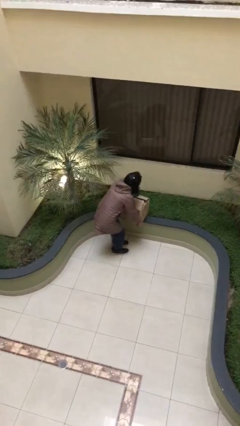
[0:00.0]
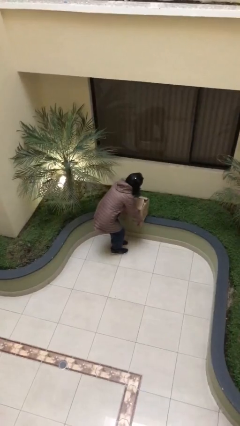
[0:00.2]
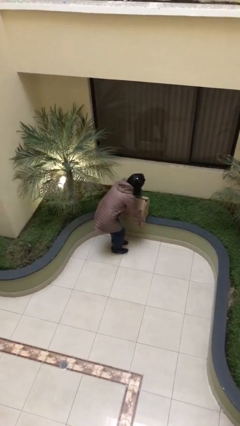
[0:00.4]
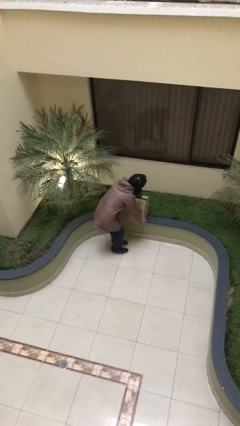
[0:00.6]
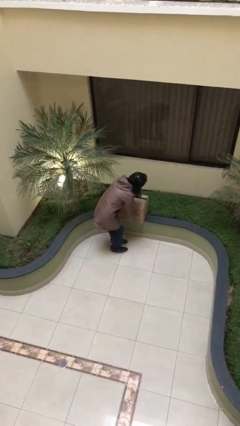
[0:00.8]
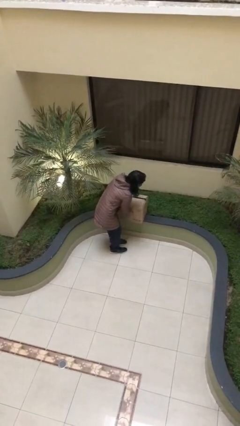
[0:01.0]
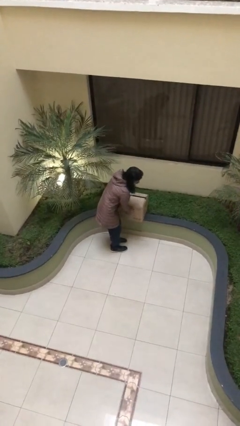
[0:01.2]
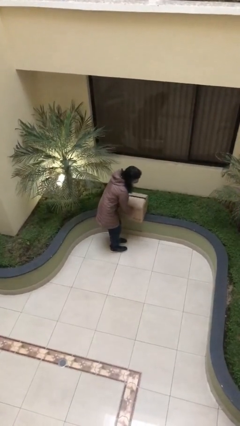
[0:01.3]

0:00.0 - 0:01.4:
person puts down object on table

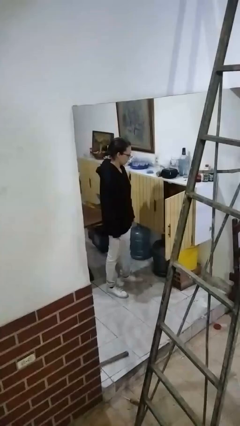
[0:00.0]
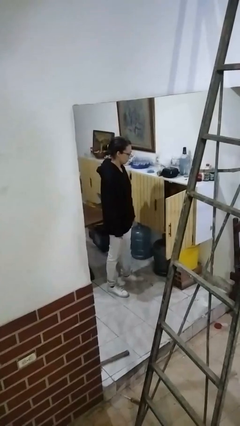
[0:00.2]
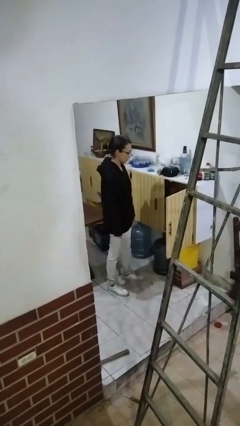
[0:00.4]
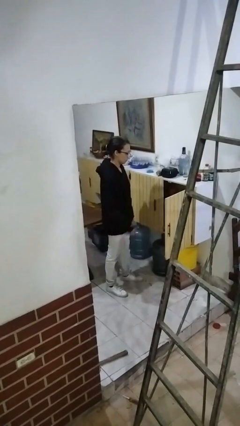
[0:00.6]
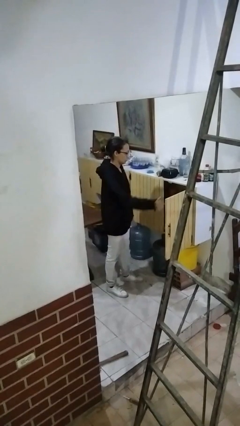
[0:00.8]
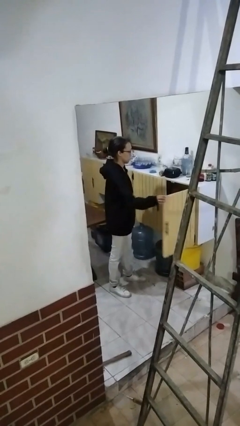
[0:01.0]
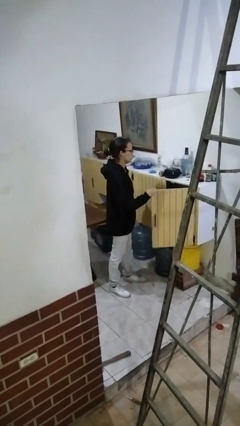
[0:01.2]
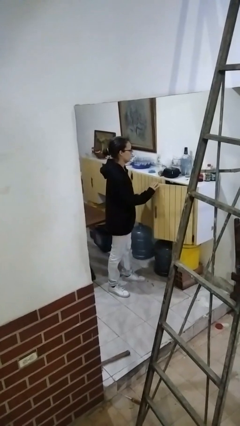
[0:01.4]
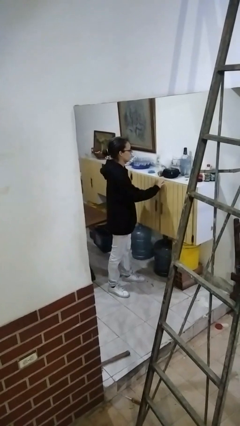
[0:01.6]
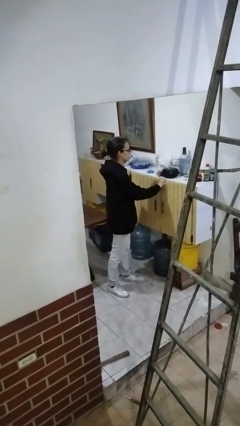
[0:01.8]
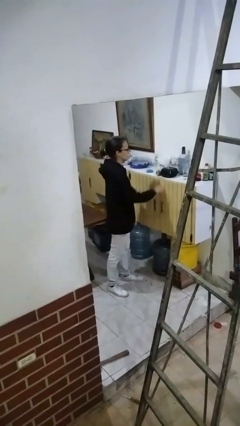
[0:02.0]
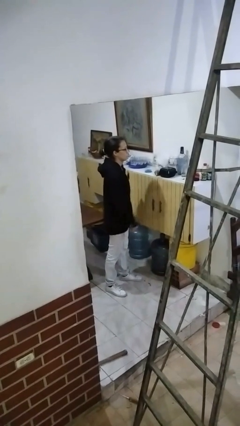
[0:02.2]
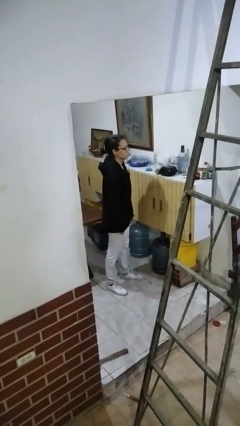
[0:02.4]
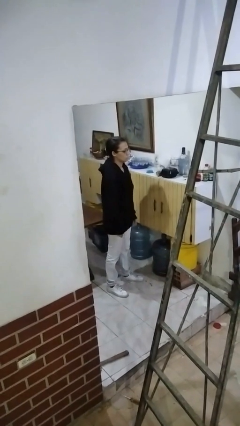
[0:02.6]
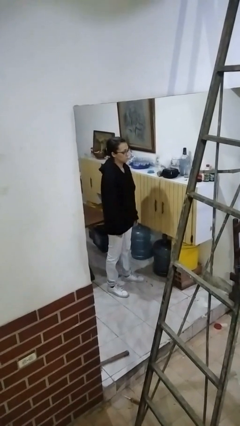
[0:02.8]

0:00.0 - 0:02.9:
person closes cabinet

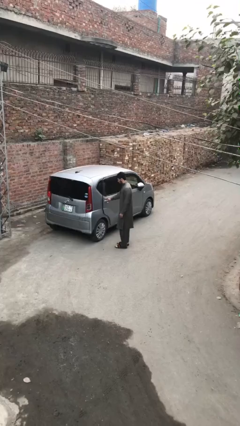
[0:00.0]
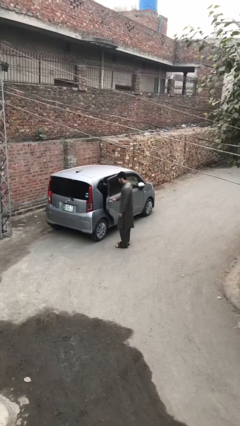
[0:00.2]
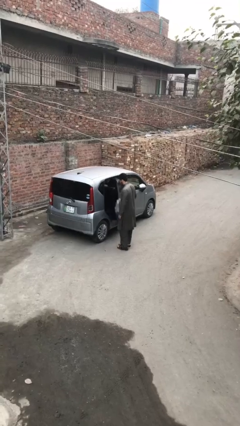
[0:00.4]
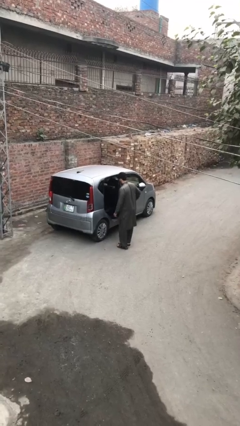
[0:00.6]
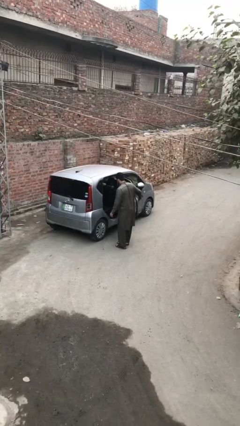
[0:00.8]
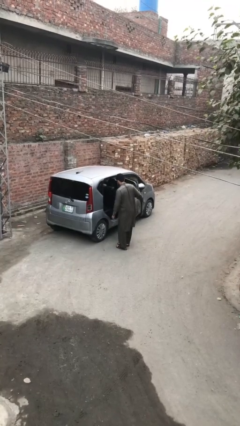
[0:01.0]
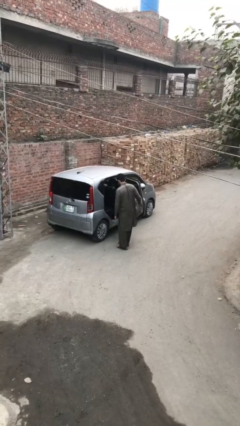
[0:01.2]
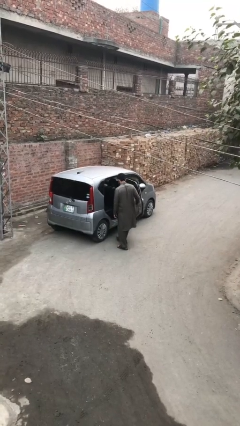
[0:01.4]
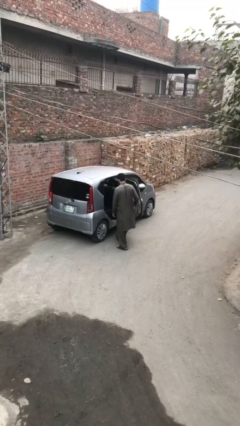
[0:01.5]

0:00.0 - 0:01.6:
person opens car door

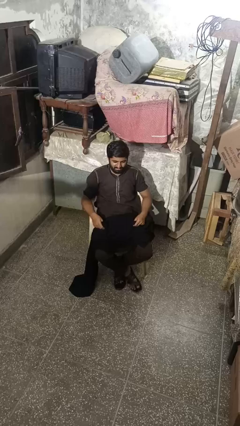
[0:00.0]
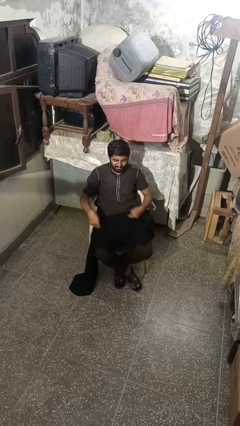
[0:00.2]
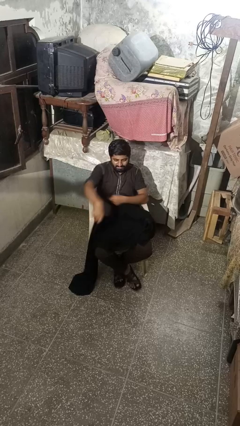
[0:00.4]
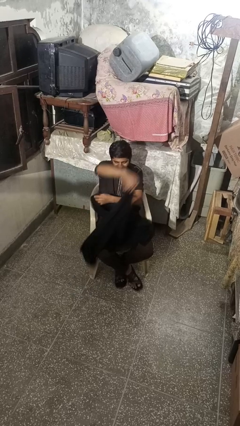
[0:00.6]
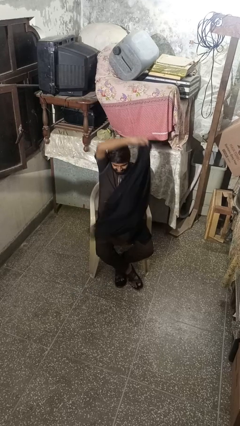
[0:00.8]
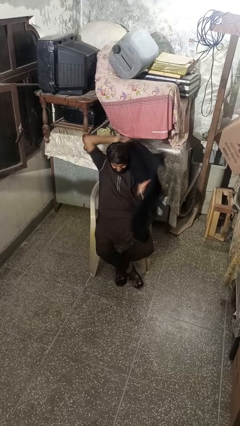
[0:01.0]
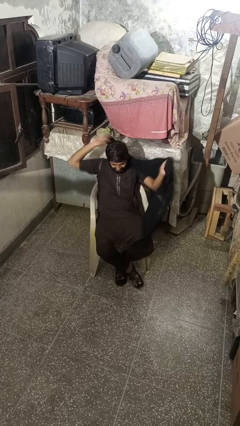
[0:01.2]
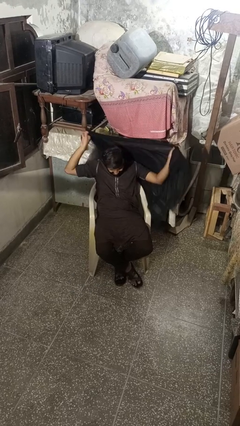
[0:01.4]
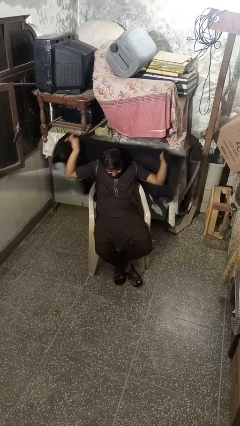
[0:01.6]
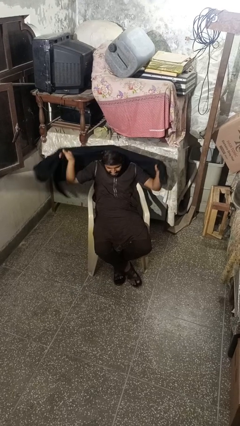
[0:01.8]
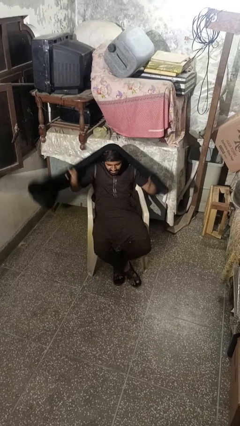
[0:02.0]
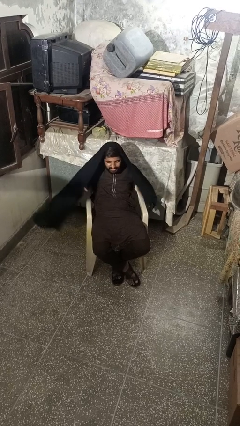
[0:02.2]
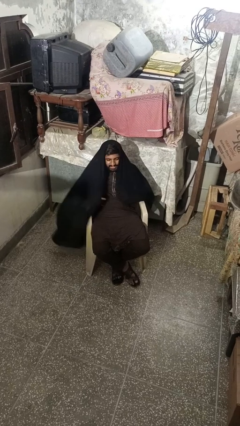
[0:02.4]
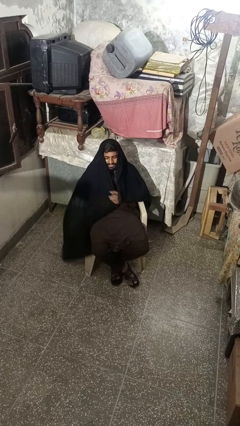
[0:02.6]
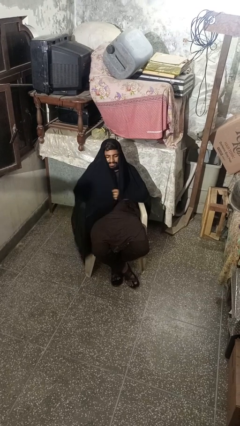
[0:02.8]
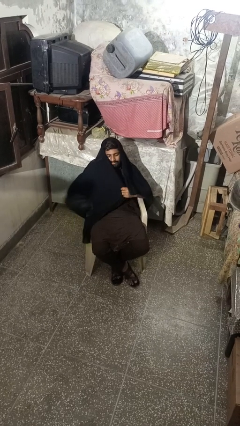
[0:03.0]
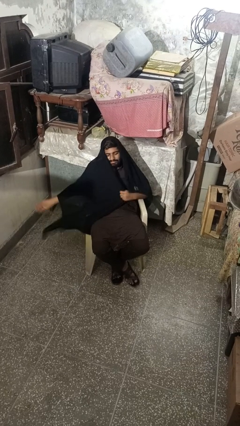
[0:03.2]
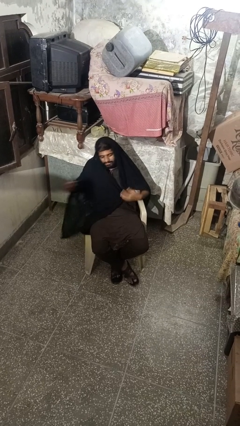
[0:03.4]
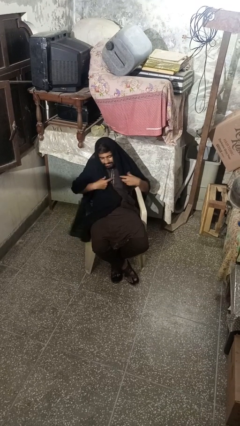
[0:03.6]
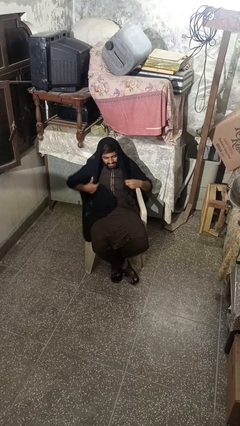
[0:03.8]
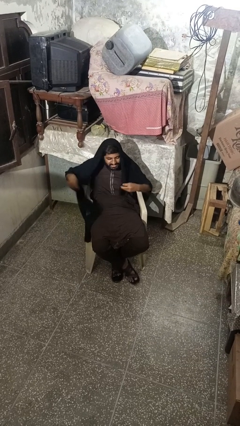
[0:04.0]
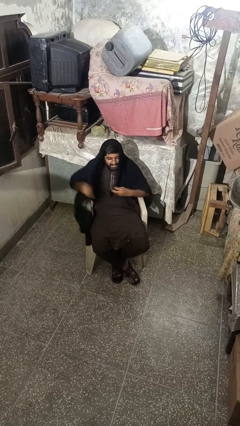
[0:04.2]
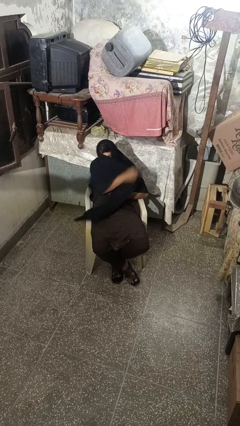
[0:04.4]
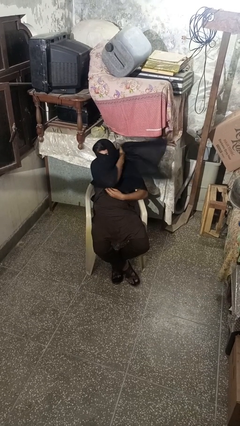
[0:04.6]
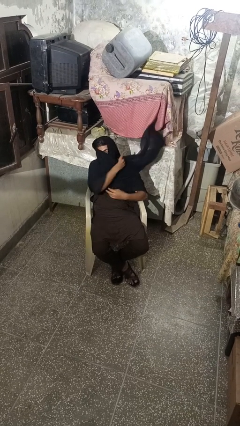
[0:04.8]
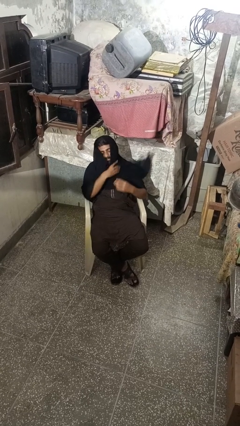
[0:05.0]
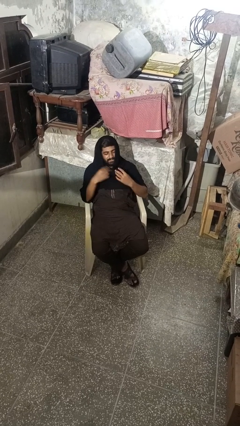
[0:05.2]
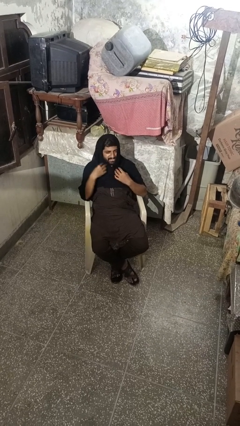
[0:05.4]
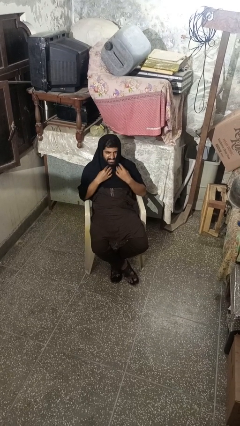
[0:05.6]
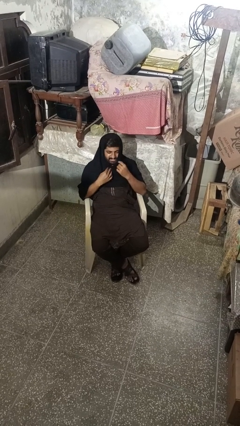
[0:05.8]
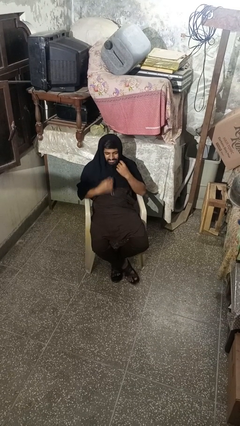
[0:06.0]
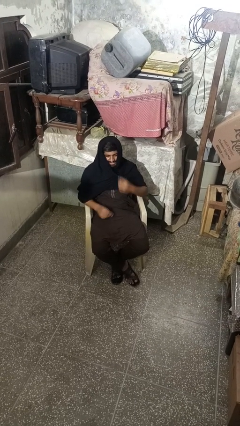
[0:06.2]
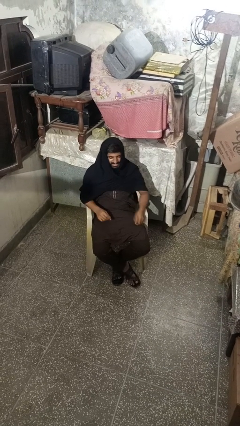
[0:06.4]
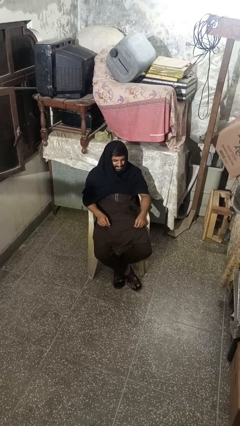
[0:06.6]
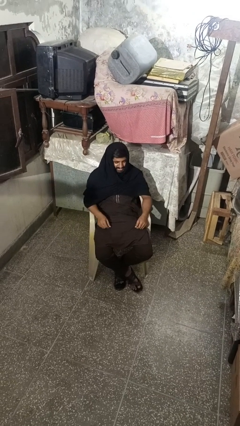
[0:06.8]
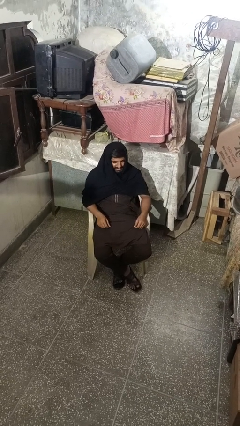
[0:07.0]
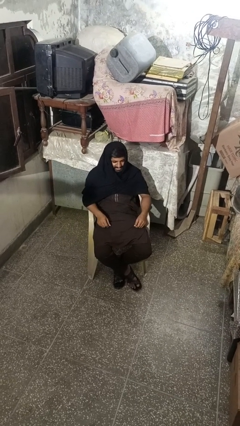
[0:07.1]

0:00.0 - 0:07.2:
person puts on scarf

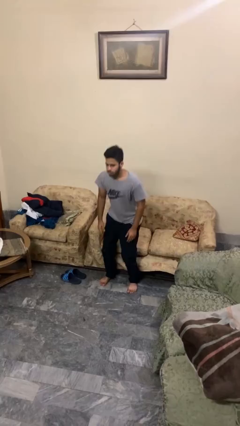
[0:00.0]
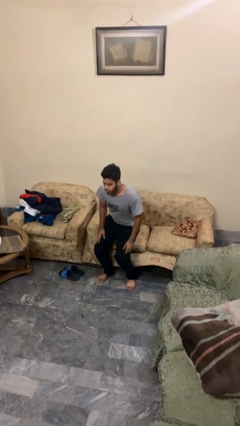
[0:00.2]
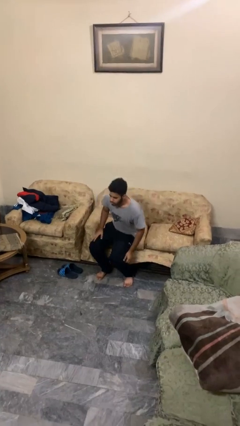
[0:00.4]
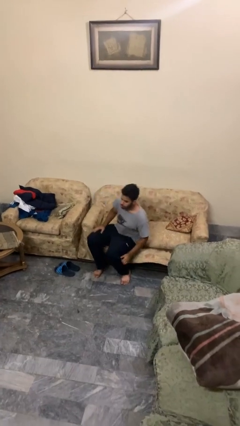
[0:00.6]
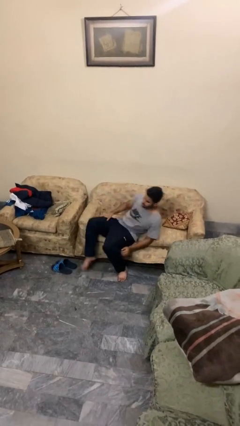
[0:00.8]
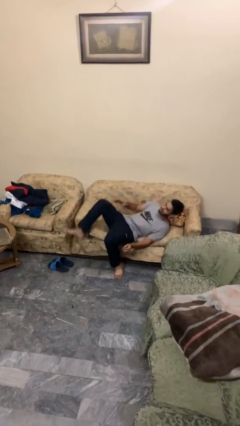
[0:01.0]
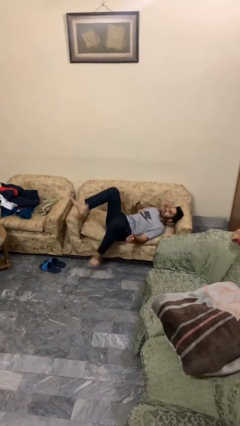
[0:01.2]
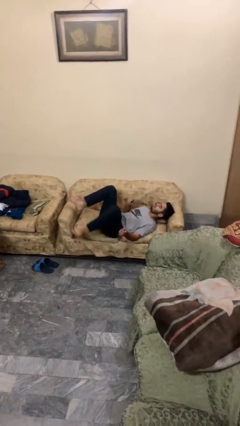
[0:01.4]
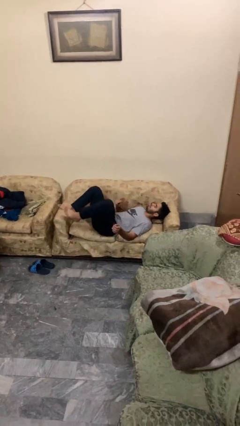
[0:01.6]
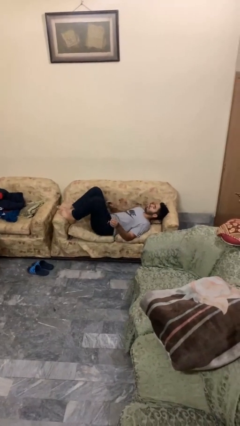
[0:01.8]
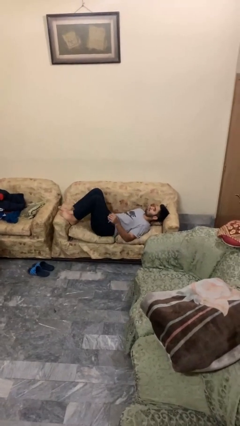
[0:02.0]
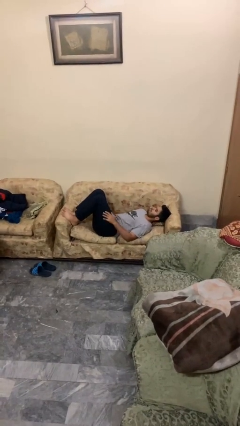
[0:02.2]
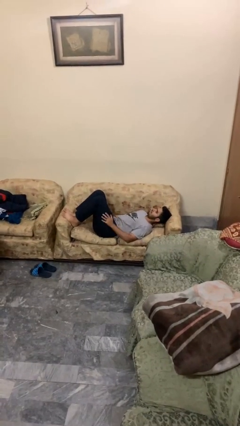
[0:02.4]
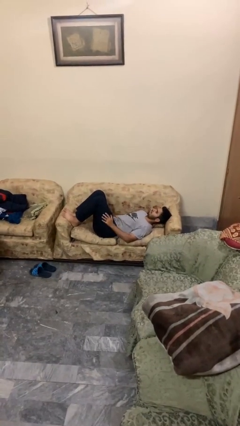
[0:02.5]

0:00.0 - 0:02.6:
person lies down on couch

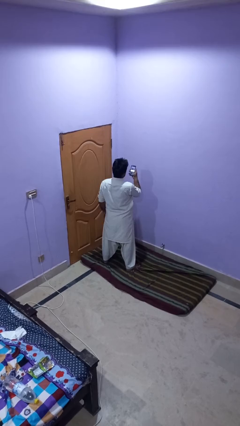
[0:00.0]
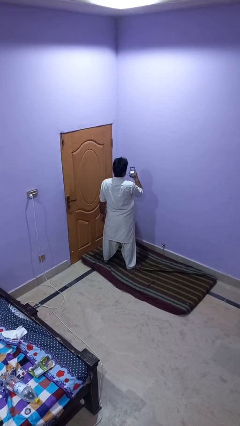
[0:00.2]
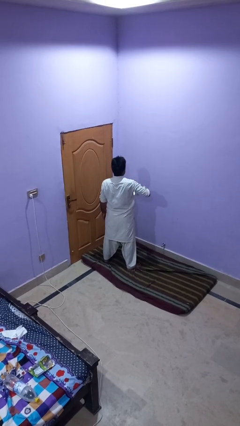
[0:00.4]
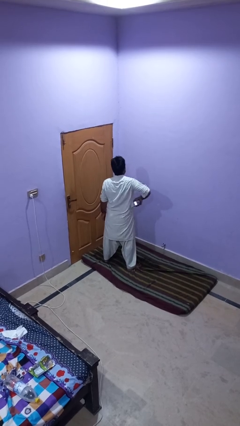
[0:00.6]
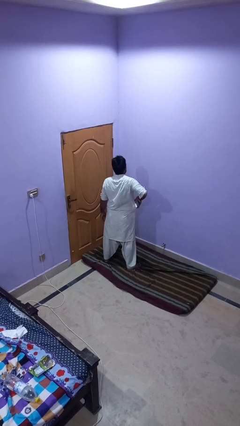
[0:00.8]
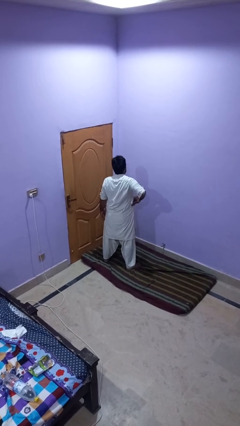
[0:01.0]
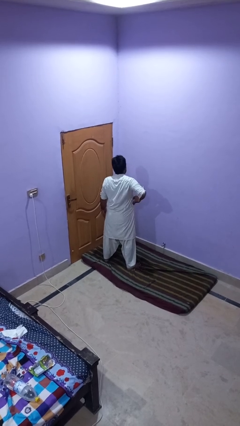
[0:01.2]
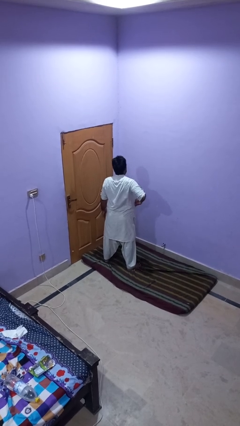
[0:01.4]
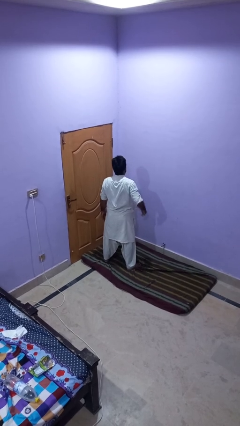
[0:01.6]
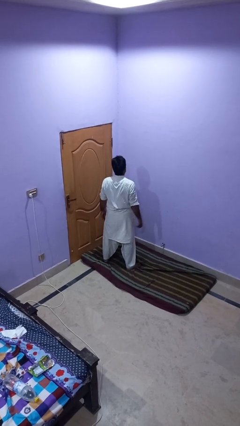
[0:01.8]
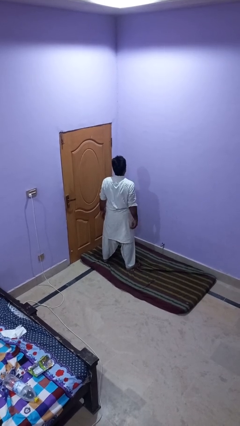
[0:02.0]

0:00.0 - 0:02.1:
person puts phone into pocket
